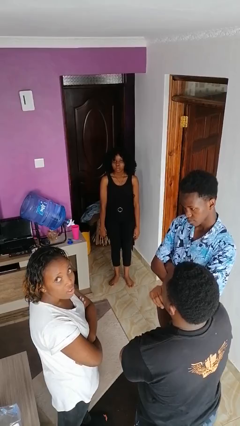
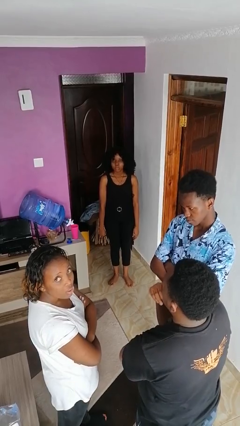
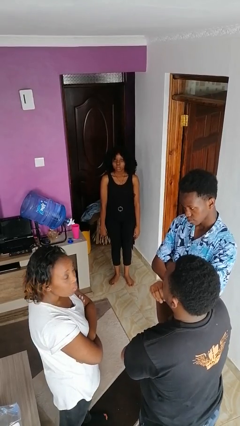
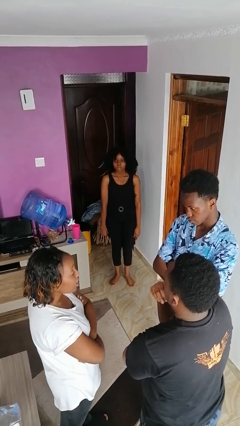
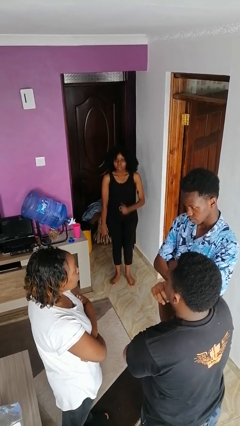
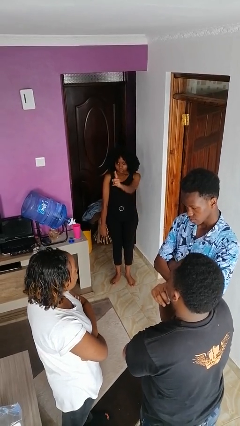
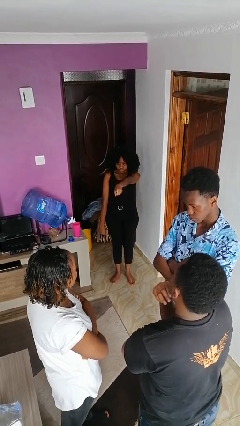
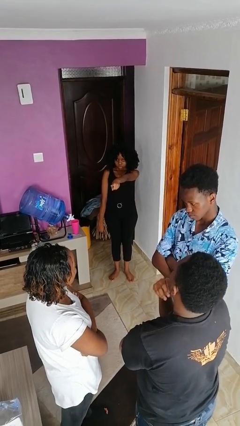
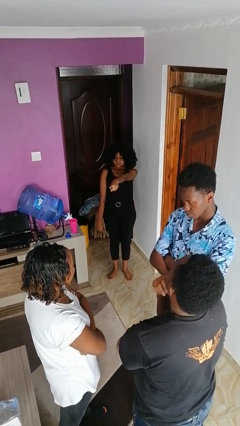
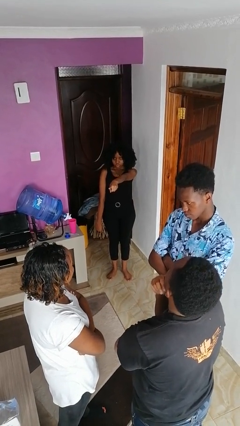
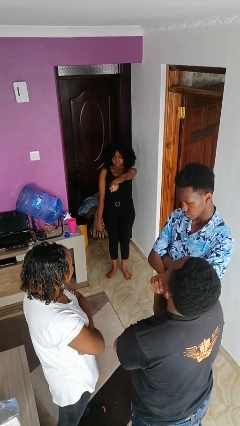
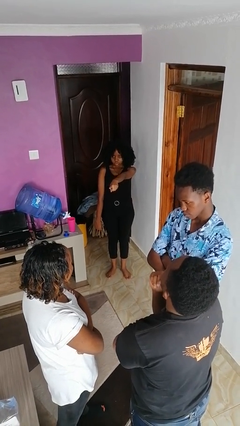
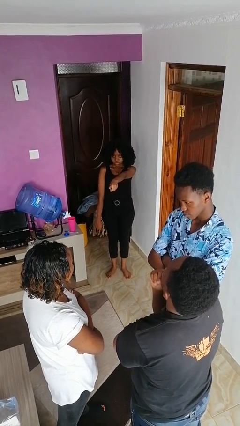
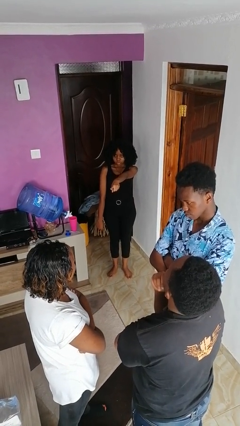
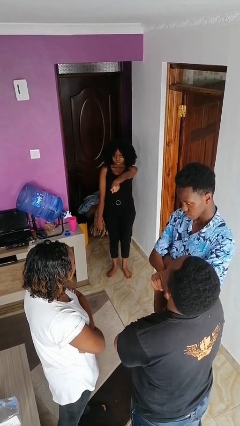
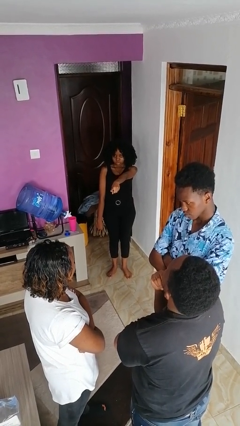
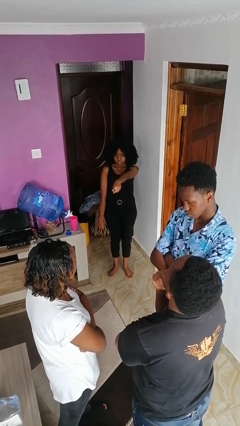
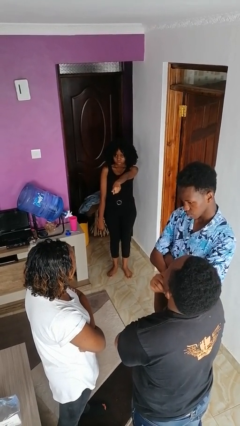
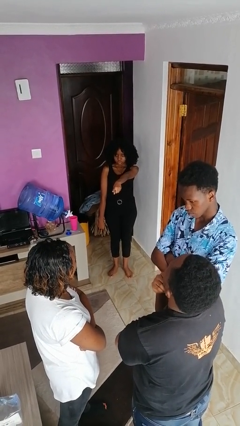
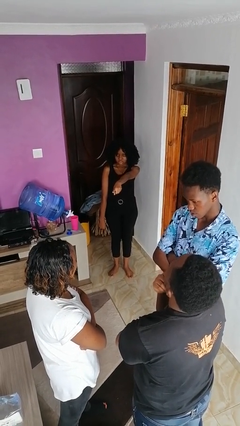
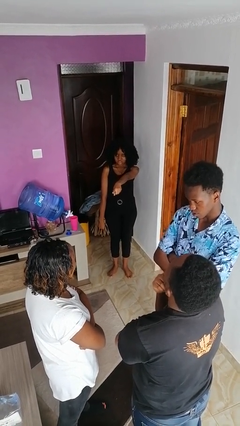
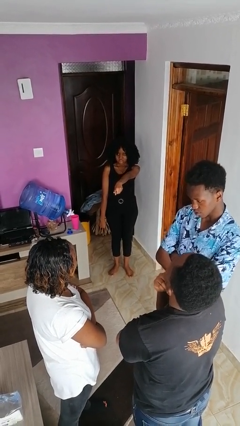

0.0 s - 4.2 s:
person points at person

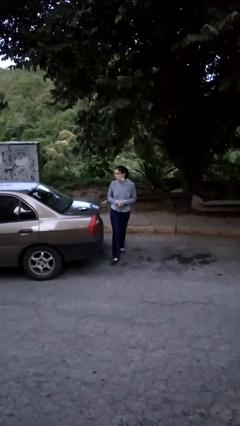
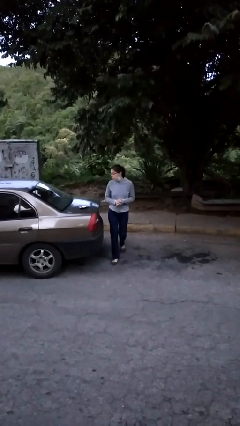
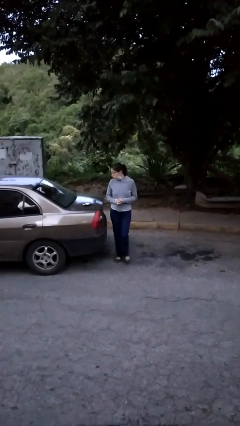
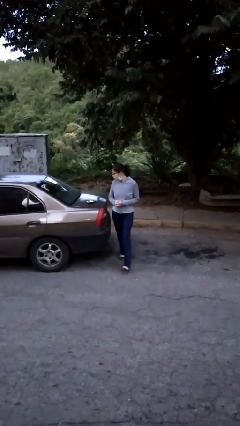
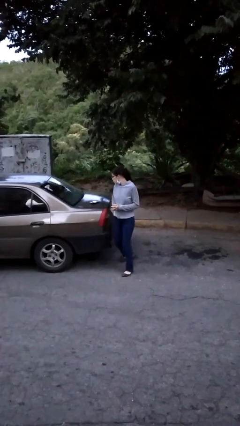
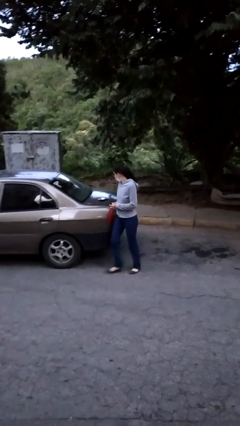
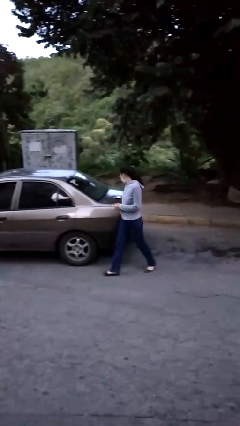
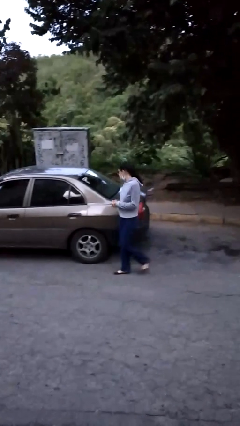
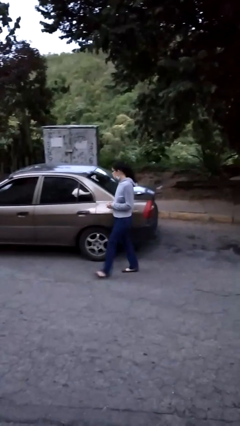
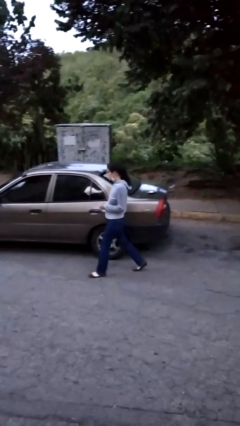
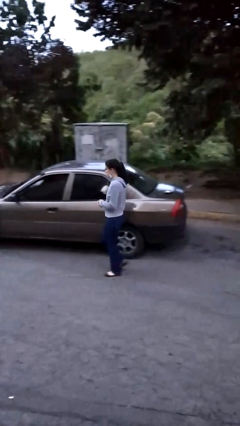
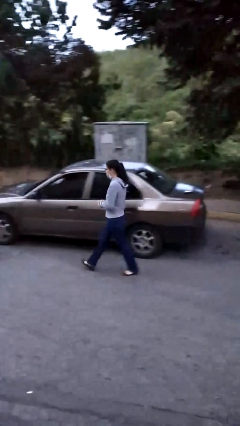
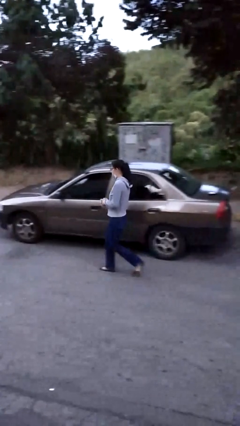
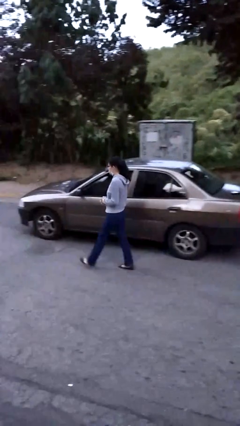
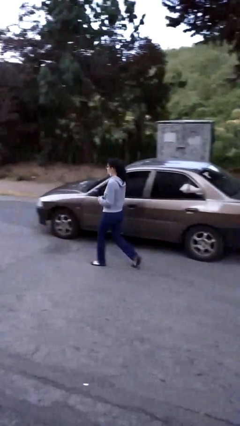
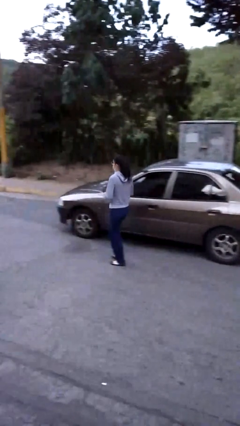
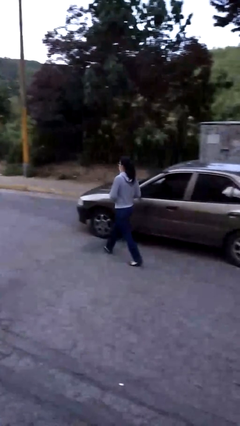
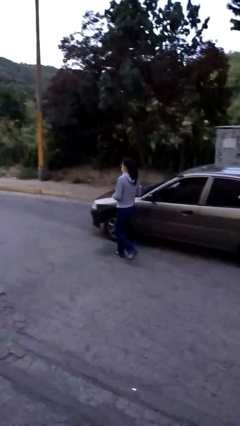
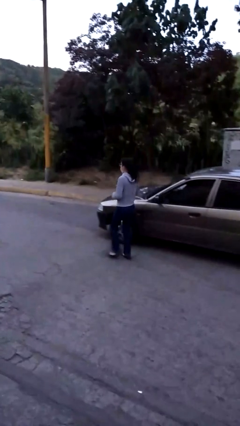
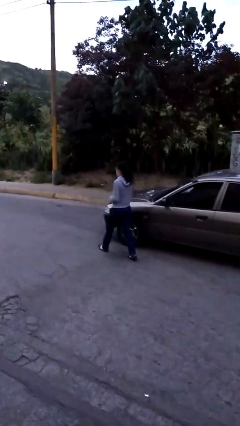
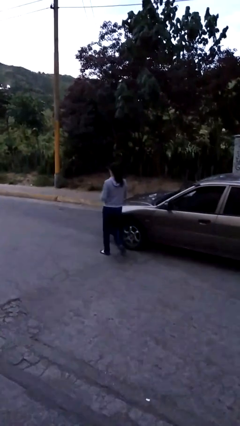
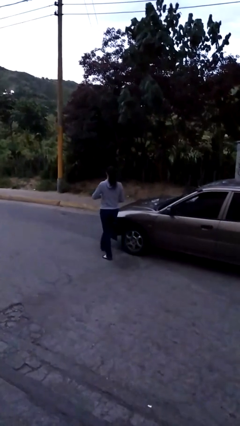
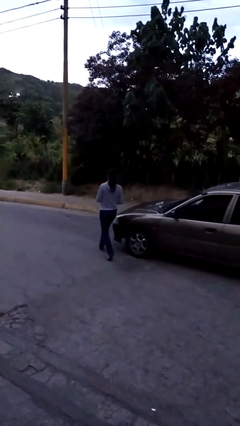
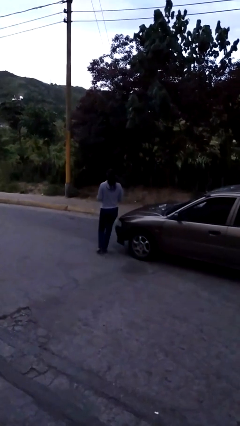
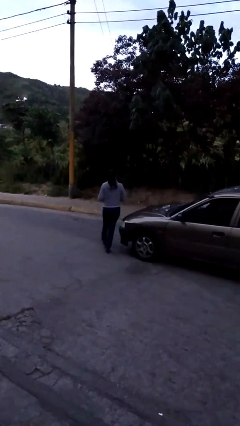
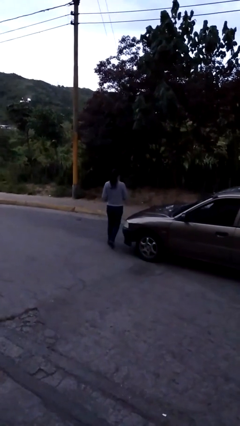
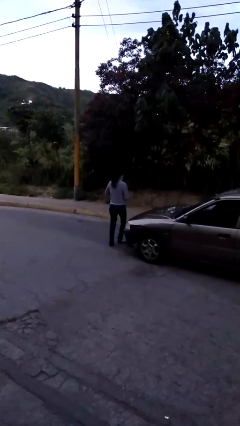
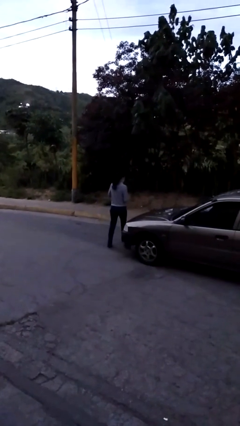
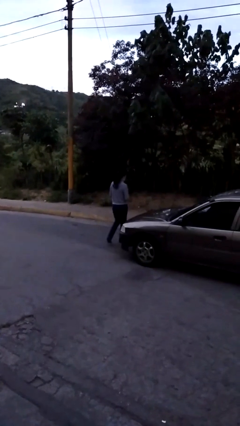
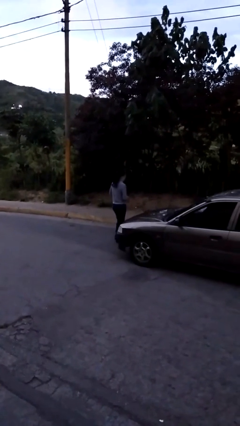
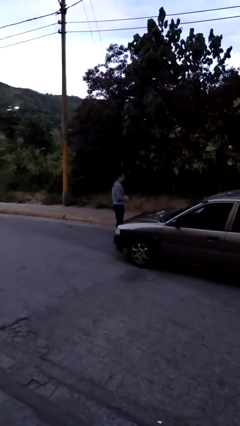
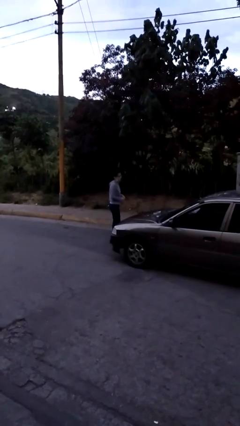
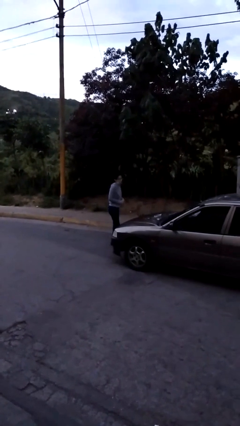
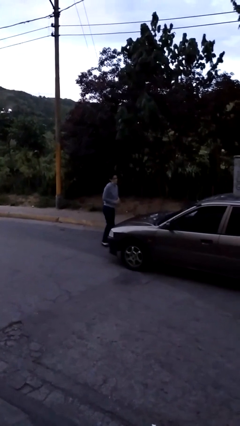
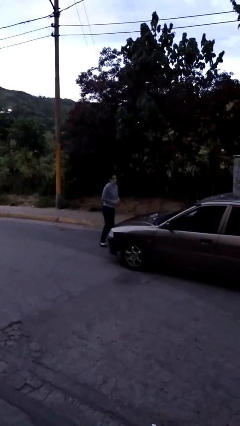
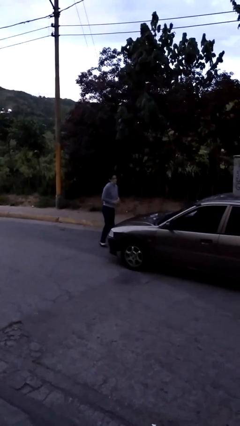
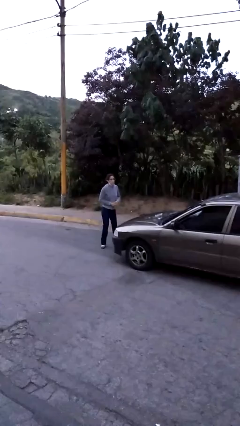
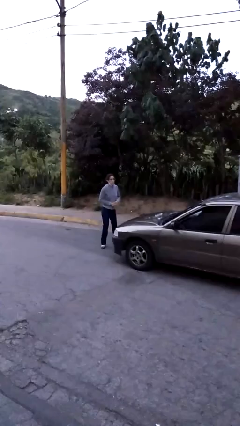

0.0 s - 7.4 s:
person walks around car

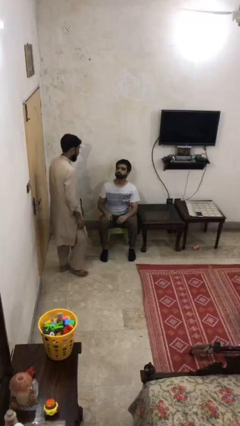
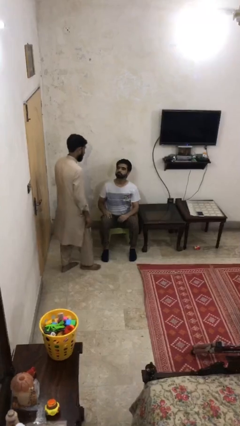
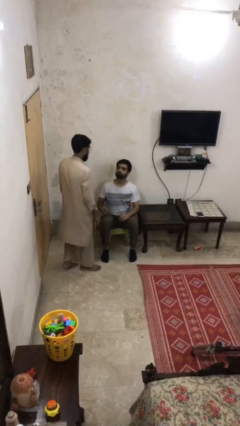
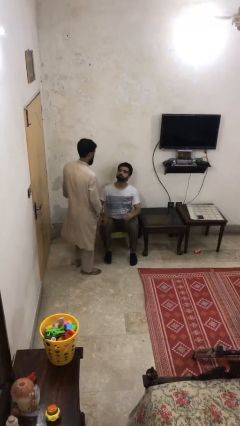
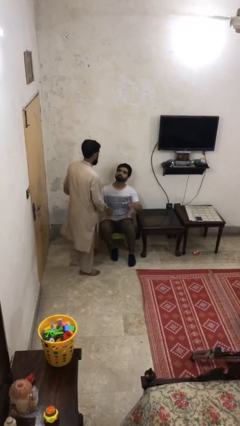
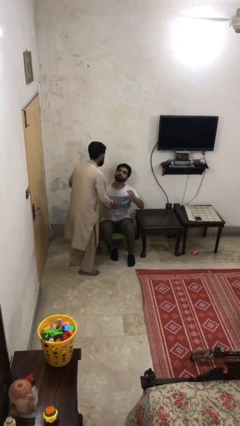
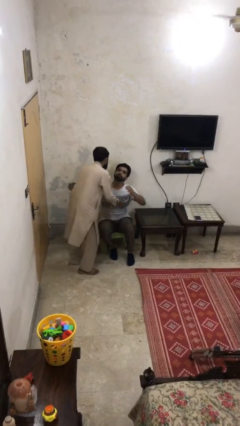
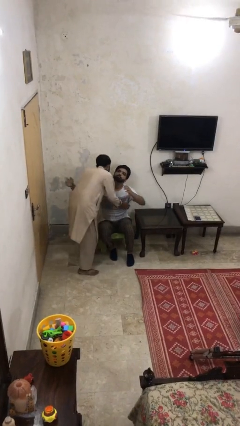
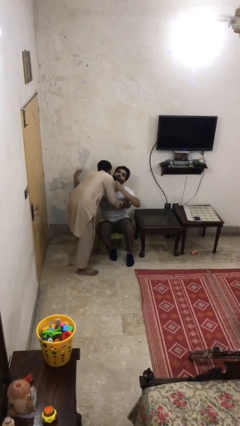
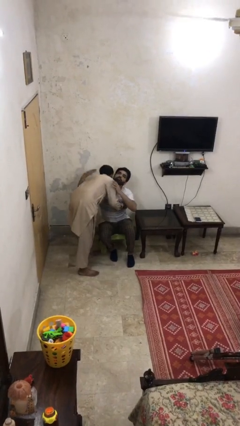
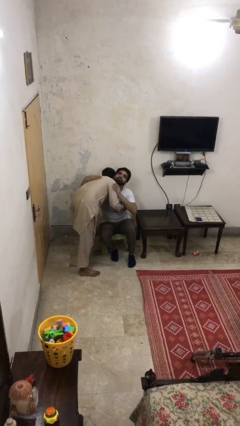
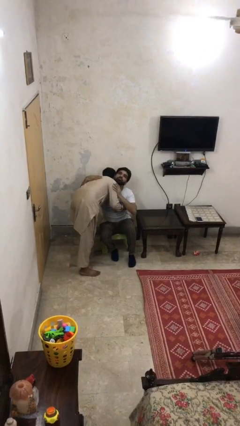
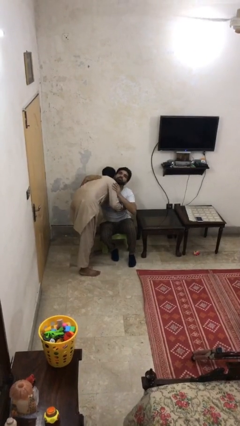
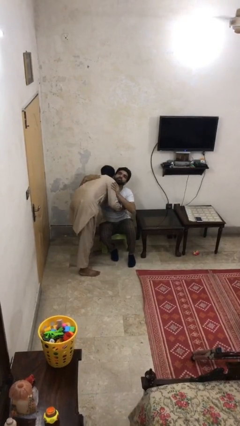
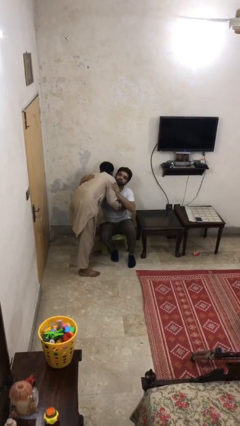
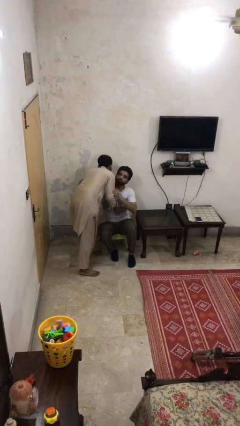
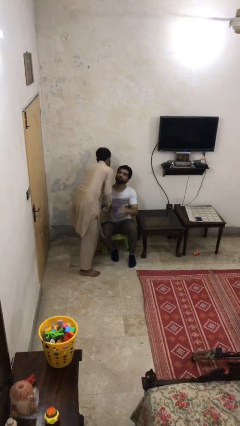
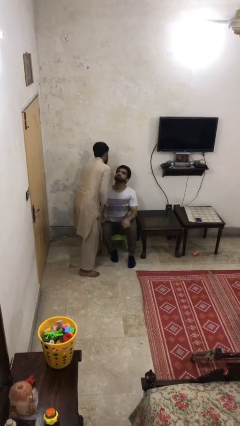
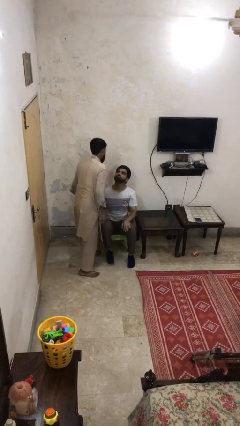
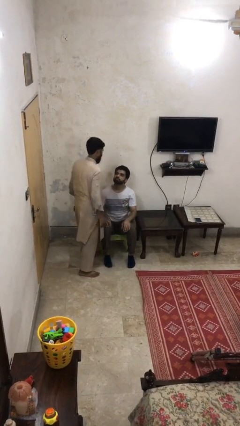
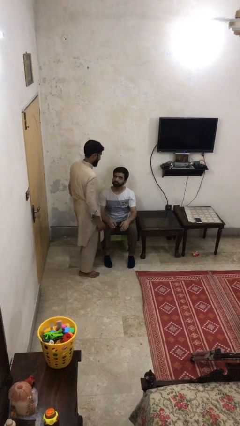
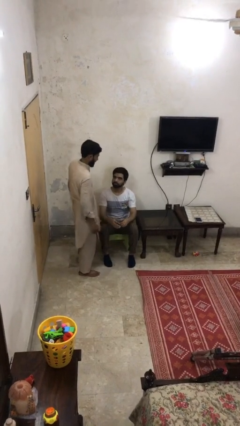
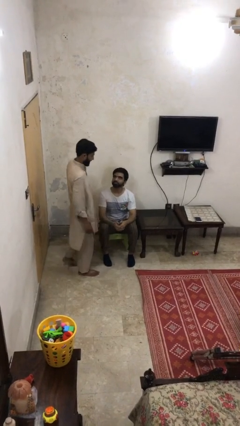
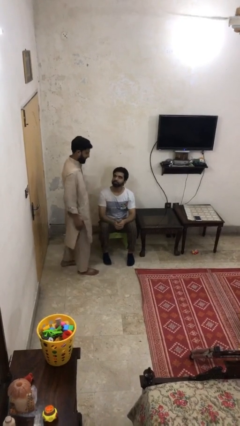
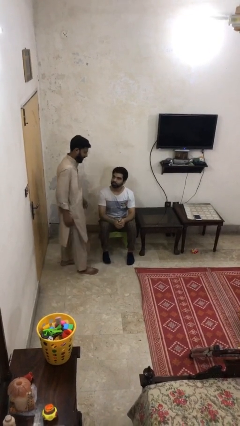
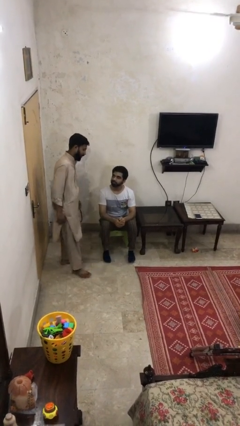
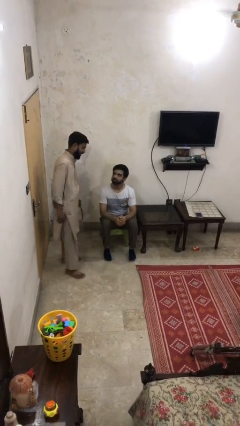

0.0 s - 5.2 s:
person embraces person

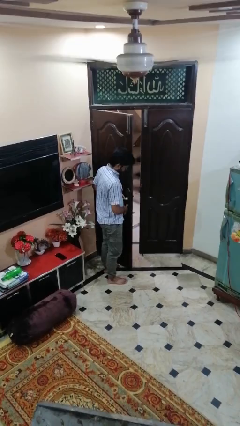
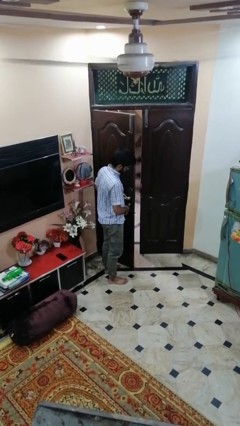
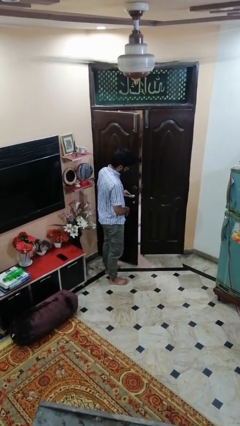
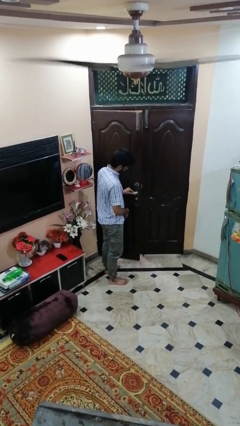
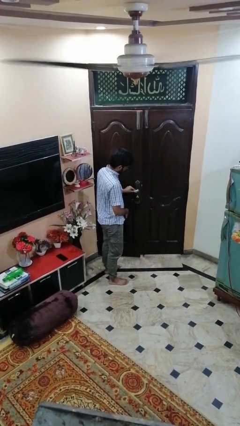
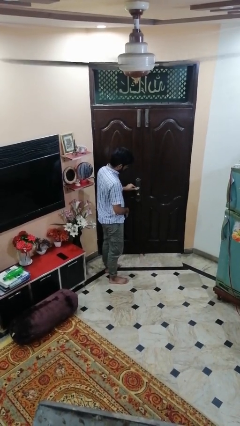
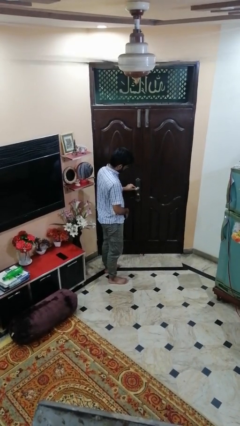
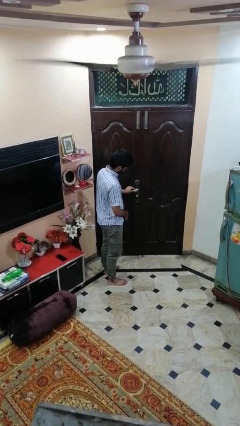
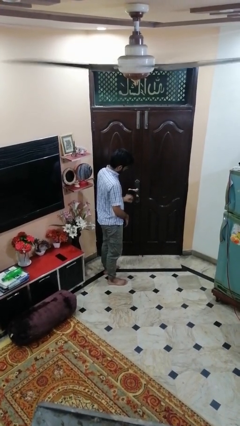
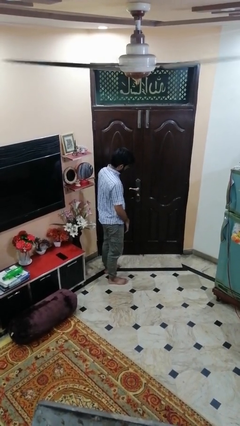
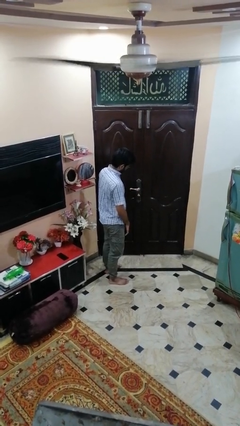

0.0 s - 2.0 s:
person closes facility door
